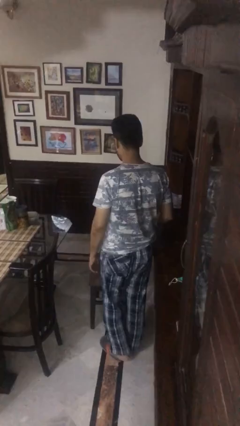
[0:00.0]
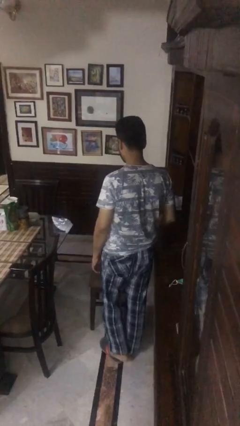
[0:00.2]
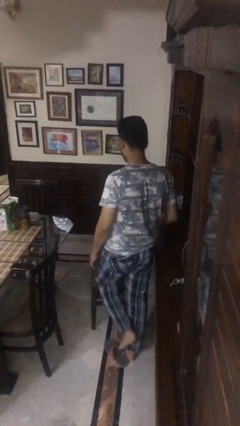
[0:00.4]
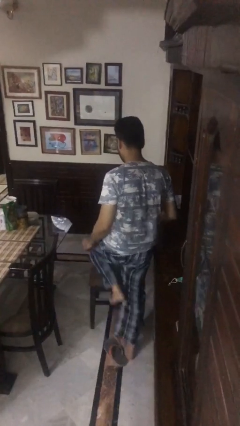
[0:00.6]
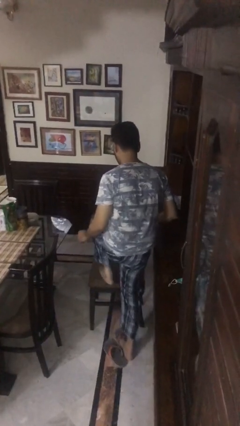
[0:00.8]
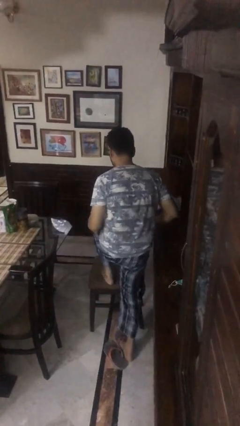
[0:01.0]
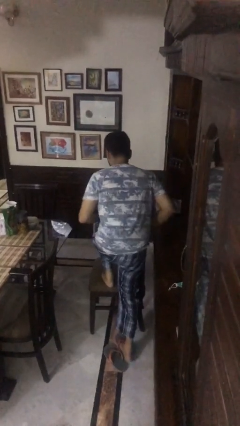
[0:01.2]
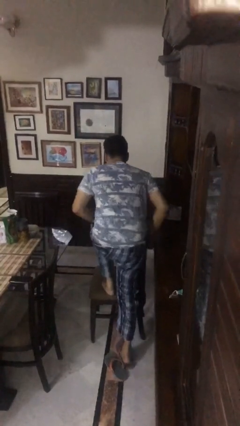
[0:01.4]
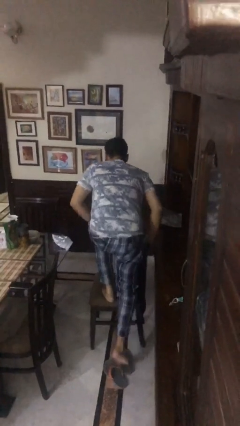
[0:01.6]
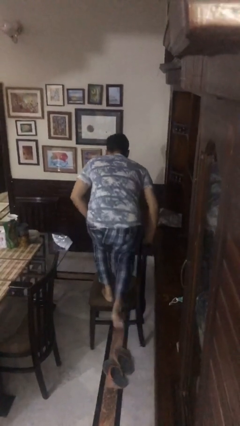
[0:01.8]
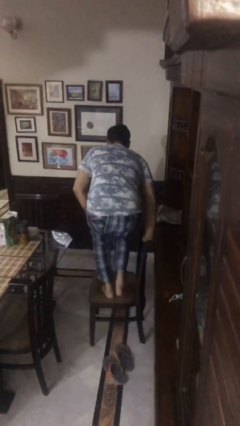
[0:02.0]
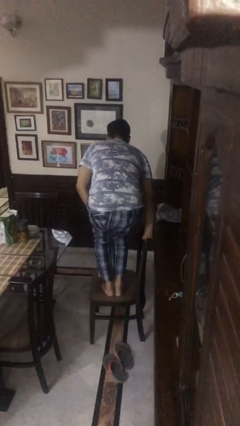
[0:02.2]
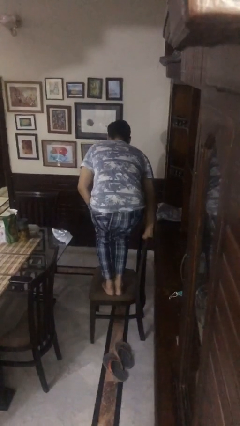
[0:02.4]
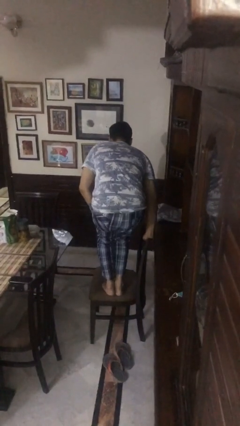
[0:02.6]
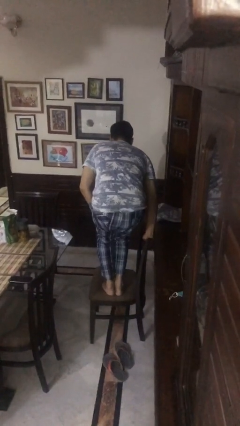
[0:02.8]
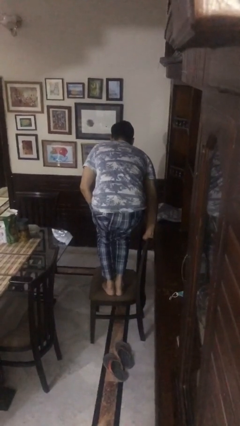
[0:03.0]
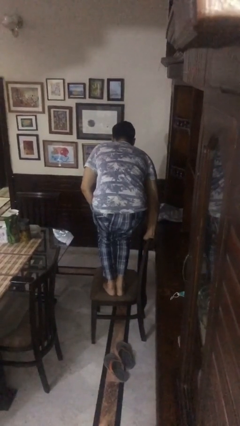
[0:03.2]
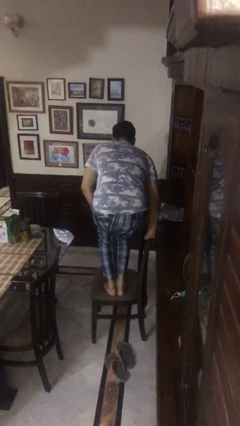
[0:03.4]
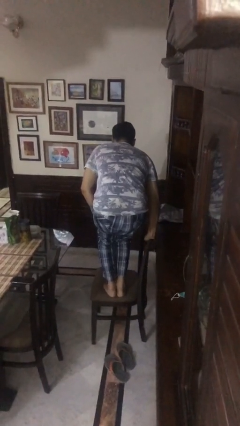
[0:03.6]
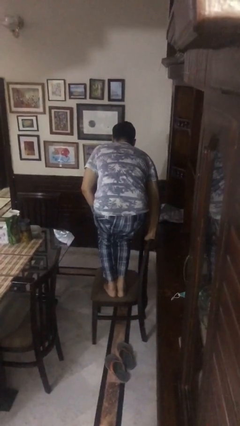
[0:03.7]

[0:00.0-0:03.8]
person climbs on chair

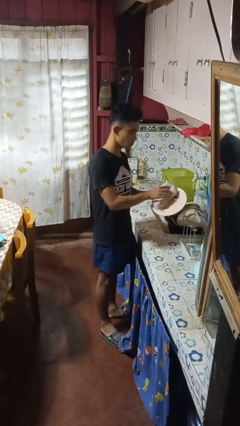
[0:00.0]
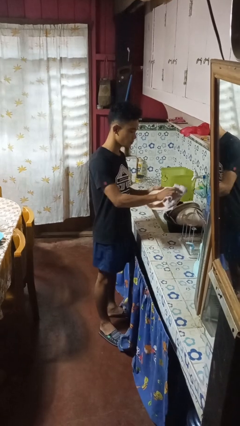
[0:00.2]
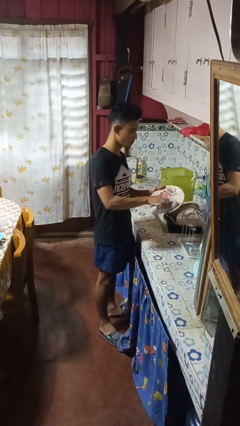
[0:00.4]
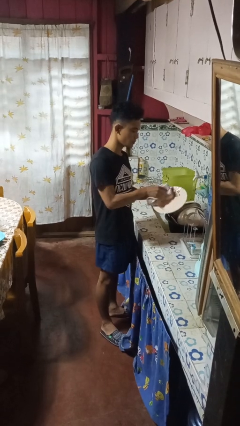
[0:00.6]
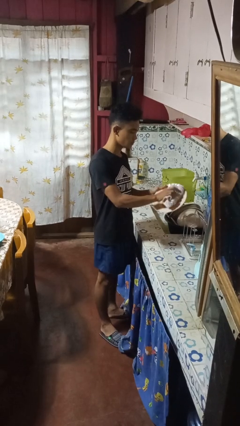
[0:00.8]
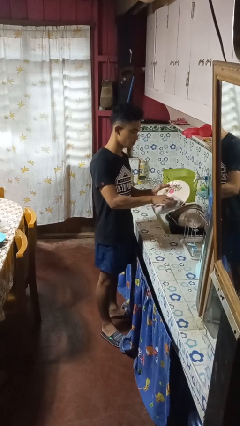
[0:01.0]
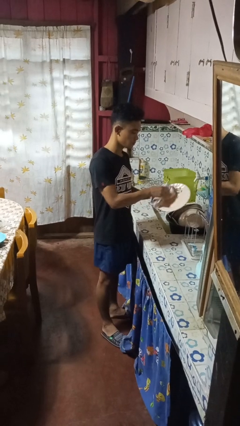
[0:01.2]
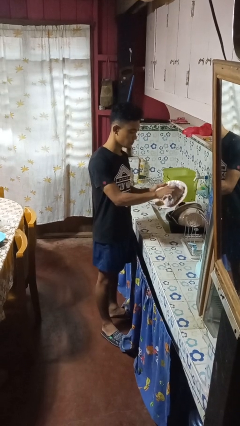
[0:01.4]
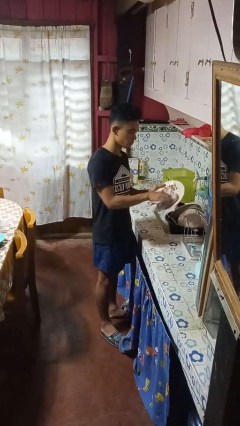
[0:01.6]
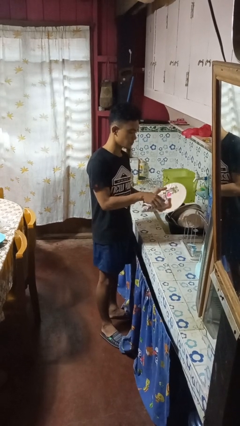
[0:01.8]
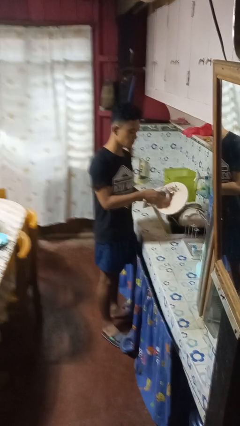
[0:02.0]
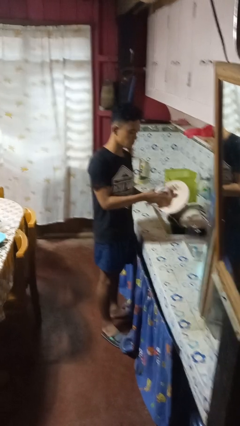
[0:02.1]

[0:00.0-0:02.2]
person dries dish

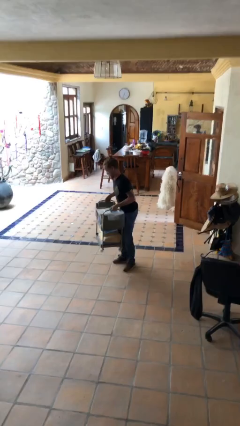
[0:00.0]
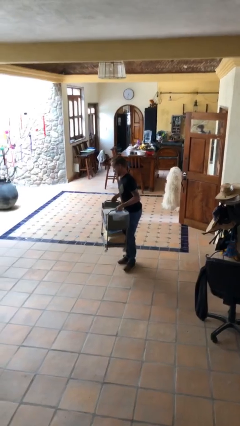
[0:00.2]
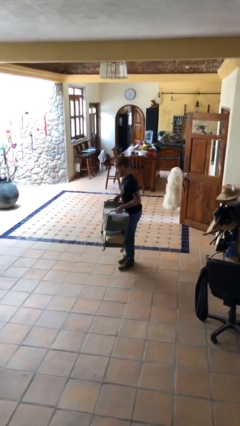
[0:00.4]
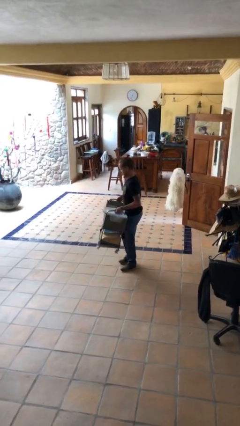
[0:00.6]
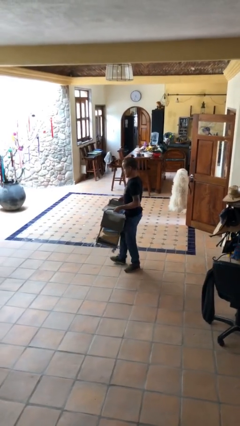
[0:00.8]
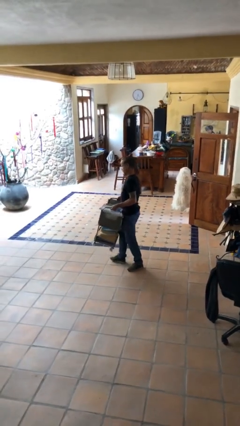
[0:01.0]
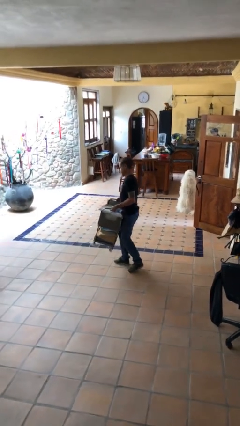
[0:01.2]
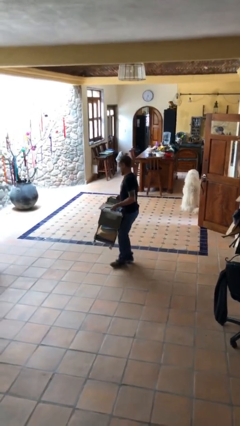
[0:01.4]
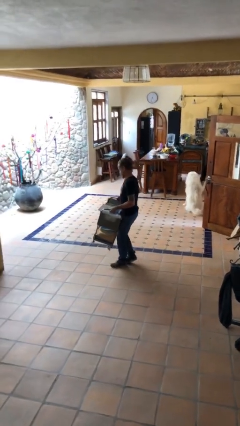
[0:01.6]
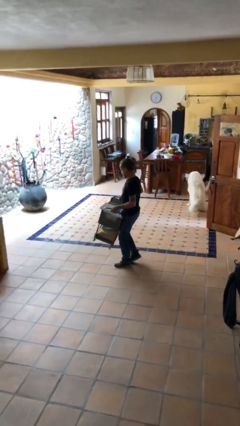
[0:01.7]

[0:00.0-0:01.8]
person carries heavy object

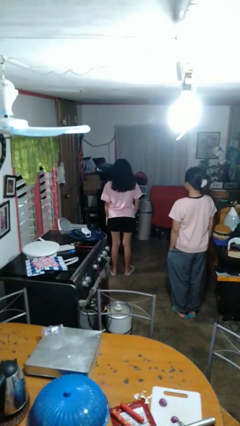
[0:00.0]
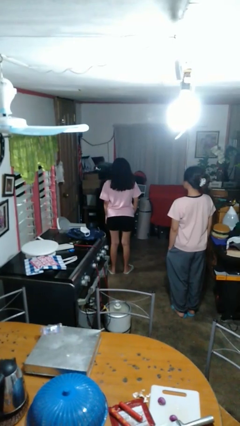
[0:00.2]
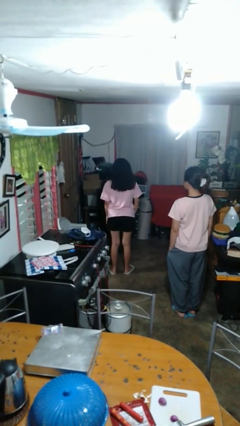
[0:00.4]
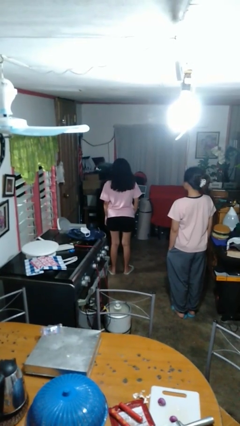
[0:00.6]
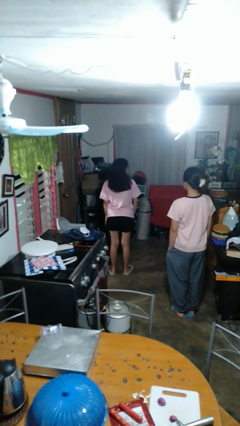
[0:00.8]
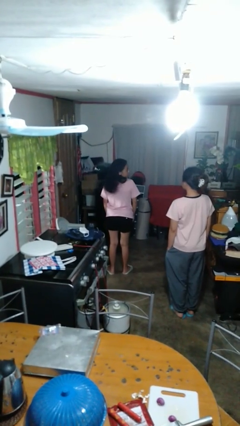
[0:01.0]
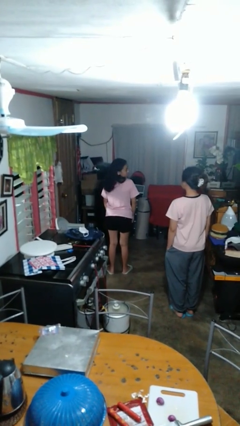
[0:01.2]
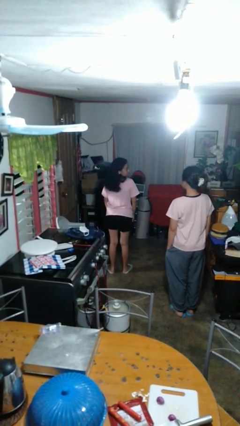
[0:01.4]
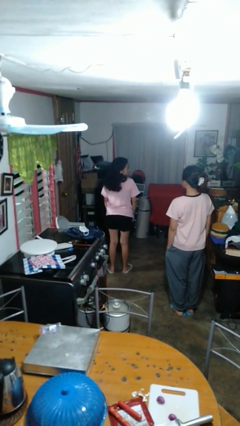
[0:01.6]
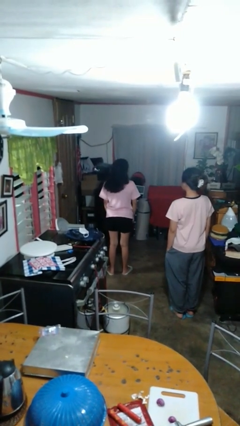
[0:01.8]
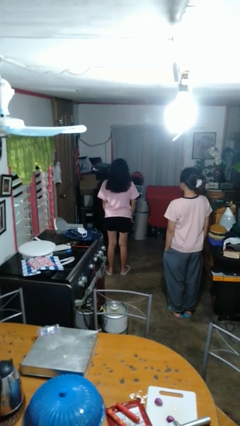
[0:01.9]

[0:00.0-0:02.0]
person looks over shoulder

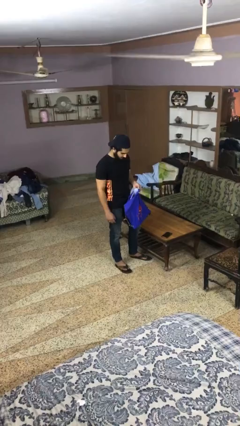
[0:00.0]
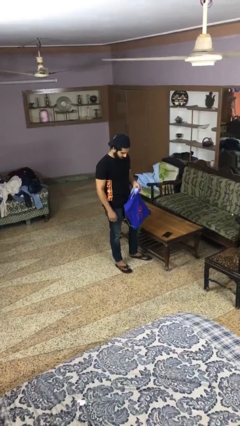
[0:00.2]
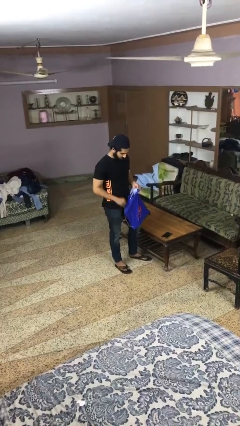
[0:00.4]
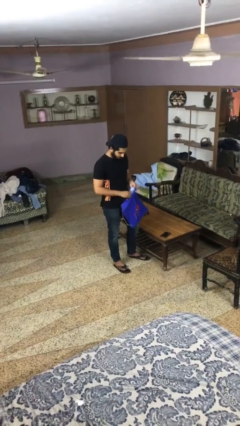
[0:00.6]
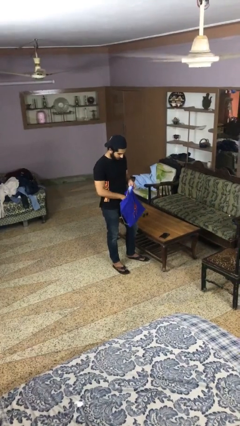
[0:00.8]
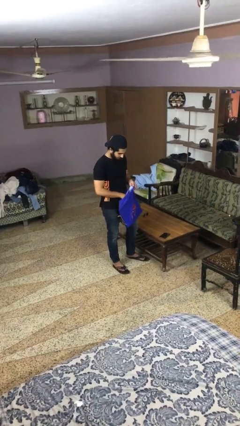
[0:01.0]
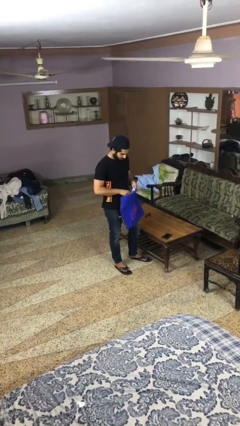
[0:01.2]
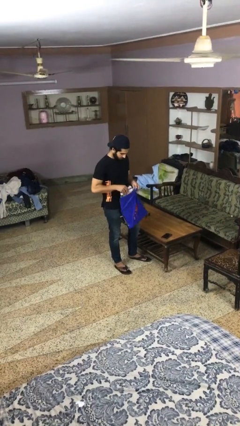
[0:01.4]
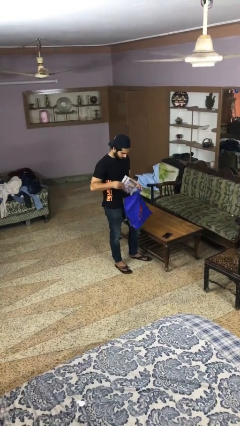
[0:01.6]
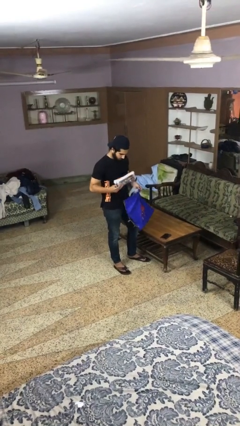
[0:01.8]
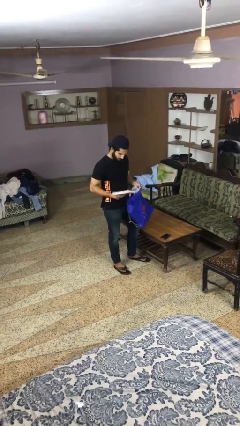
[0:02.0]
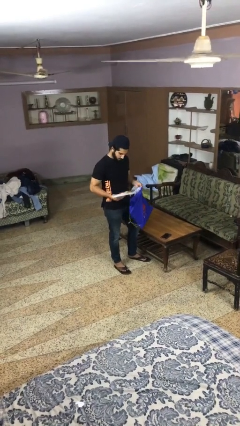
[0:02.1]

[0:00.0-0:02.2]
person takes object from bag

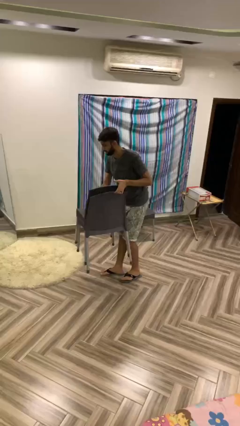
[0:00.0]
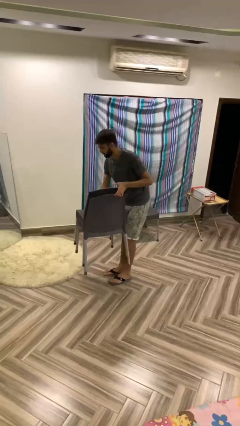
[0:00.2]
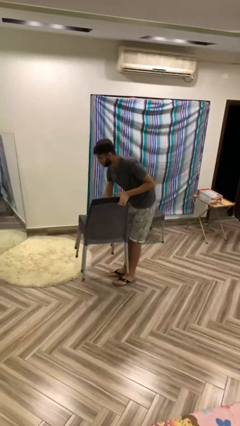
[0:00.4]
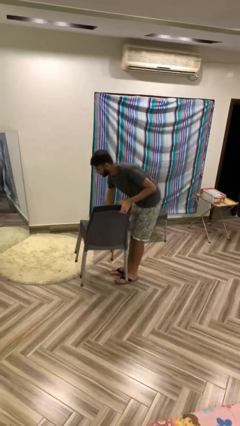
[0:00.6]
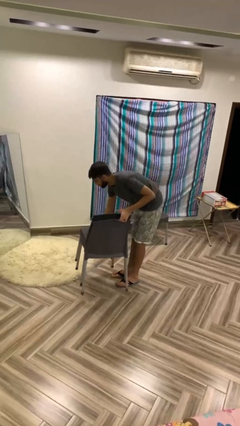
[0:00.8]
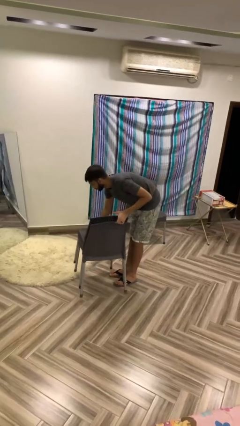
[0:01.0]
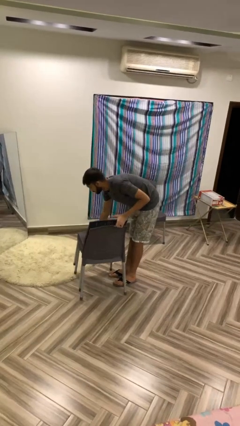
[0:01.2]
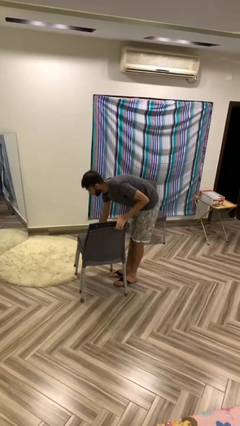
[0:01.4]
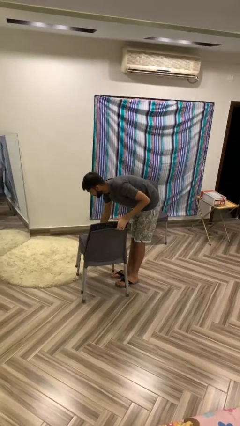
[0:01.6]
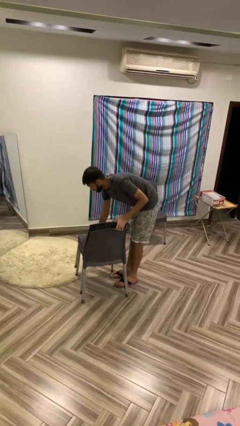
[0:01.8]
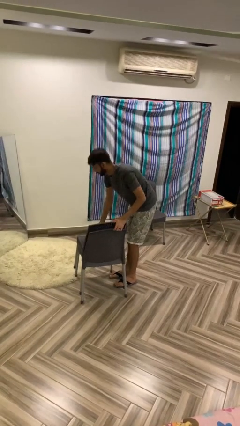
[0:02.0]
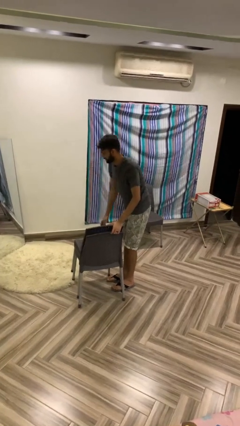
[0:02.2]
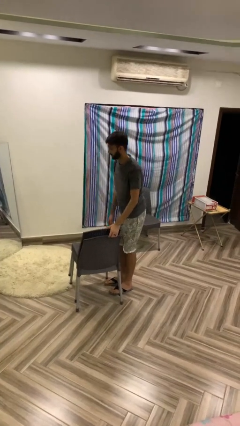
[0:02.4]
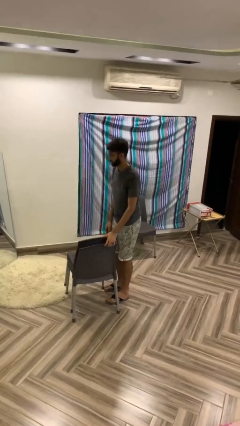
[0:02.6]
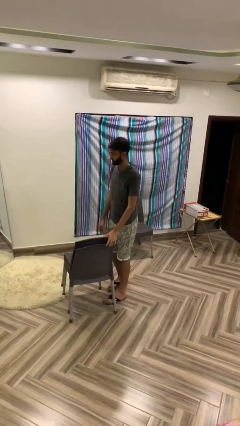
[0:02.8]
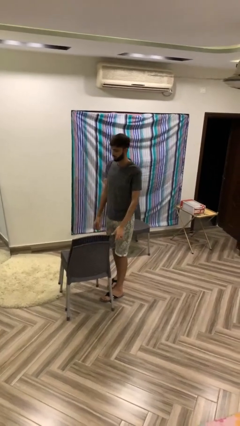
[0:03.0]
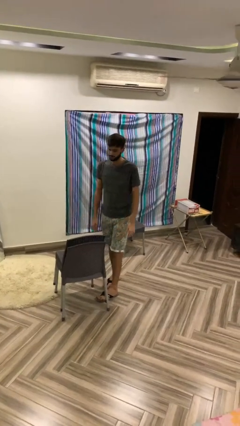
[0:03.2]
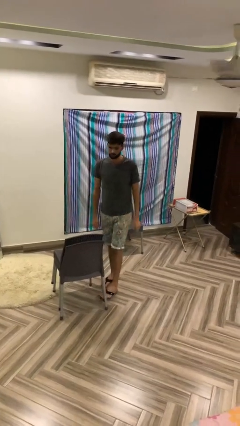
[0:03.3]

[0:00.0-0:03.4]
person puts down object on floor

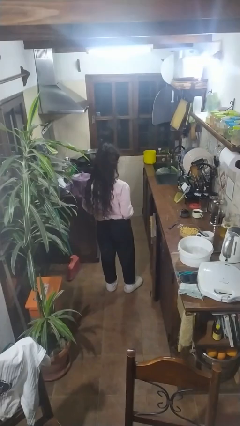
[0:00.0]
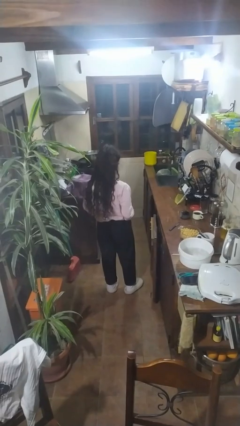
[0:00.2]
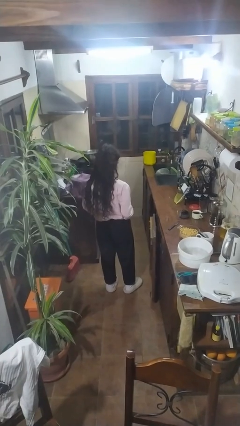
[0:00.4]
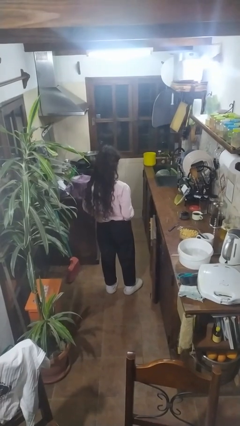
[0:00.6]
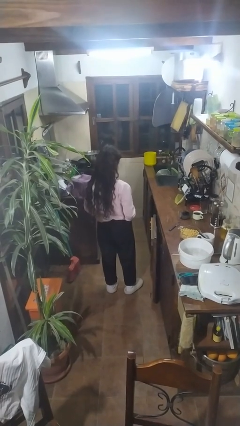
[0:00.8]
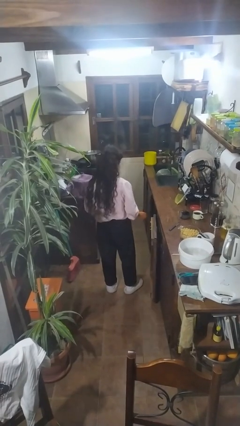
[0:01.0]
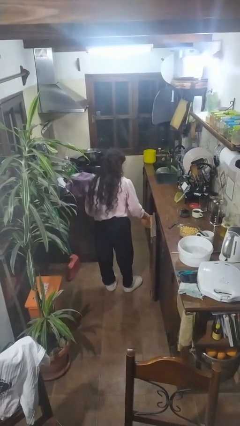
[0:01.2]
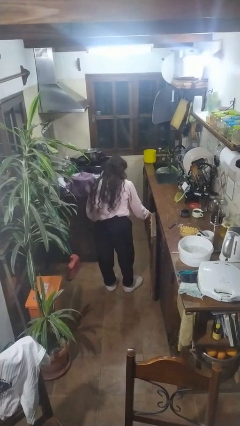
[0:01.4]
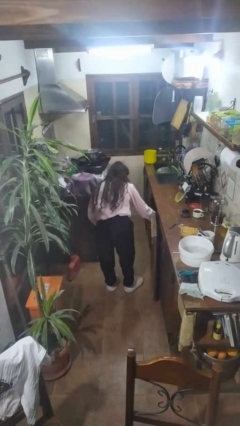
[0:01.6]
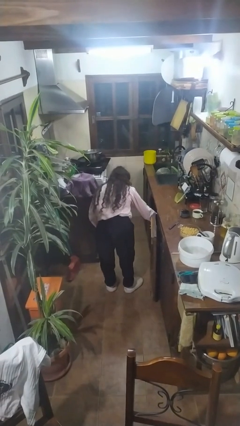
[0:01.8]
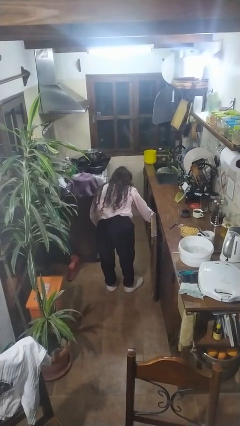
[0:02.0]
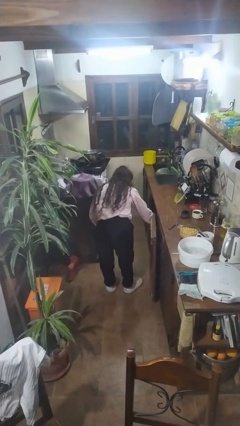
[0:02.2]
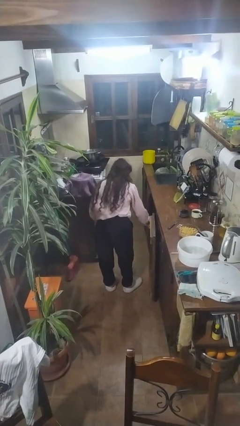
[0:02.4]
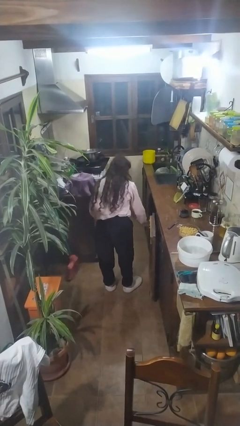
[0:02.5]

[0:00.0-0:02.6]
person puts object in cabinet
